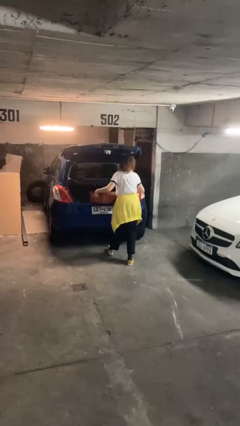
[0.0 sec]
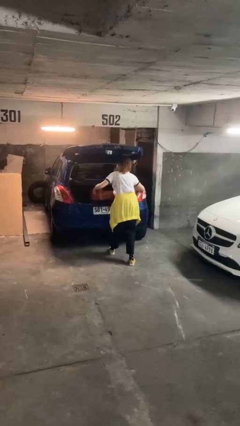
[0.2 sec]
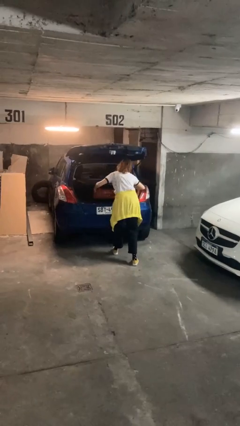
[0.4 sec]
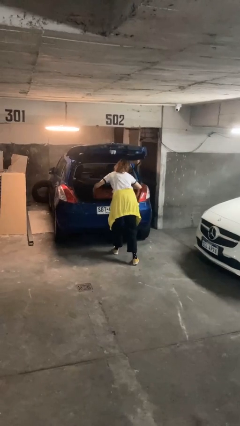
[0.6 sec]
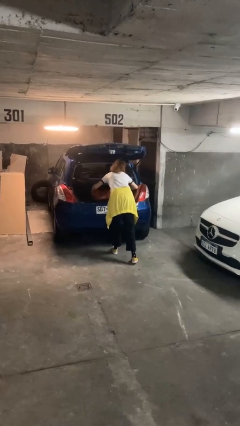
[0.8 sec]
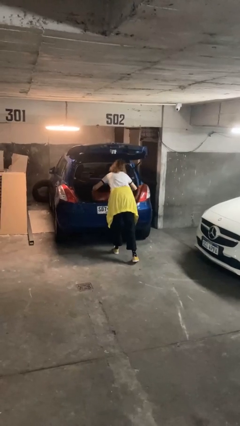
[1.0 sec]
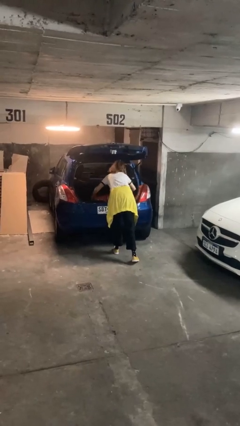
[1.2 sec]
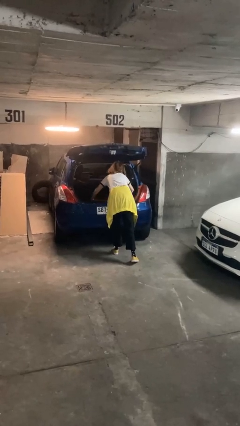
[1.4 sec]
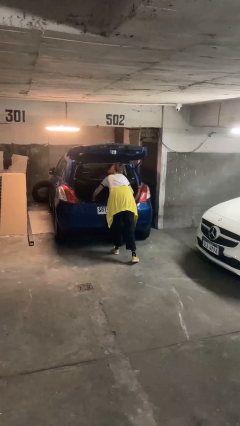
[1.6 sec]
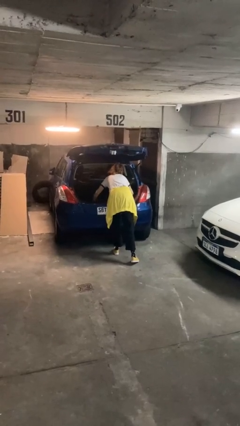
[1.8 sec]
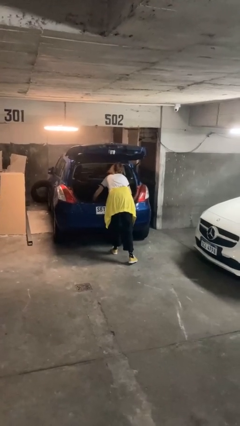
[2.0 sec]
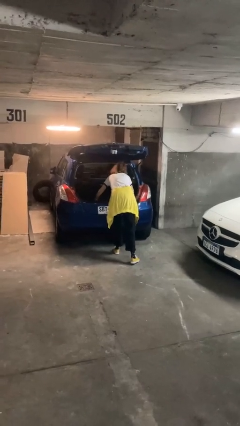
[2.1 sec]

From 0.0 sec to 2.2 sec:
person loads car

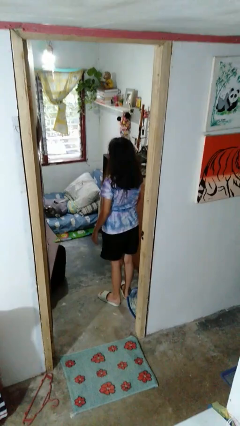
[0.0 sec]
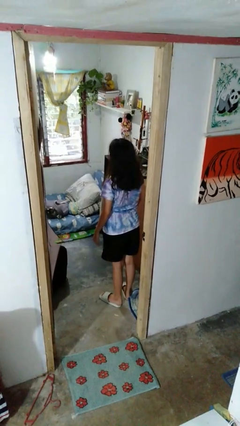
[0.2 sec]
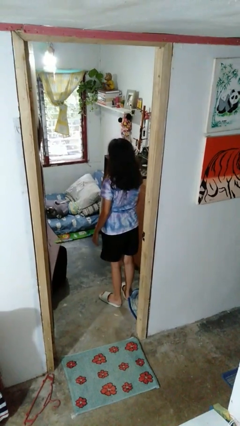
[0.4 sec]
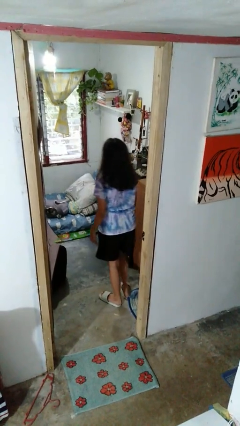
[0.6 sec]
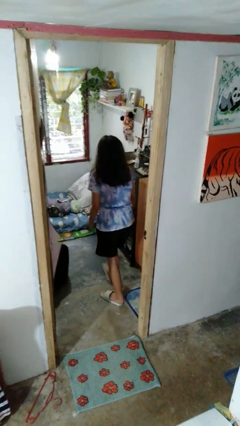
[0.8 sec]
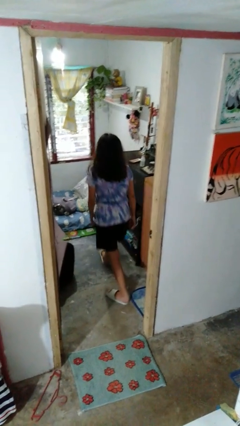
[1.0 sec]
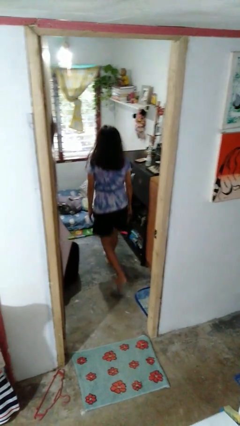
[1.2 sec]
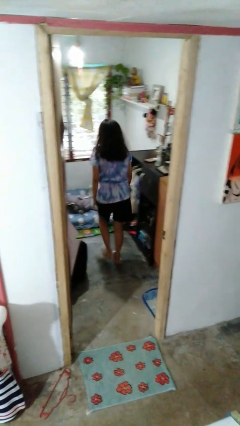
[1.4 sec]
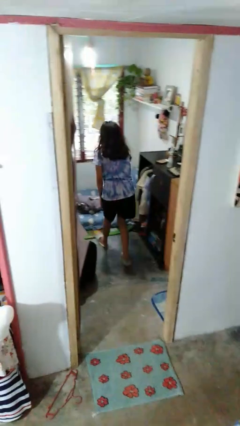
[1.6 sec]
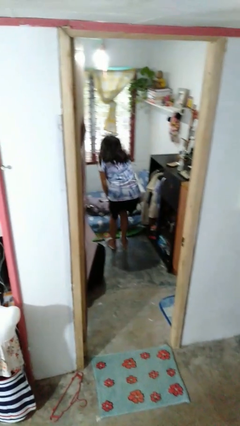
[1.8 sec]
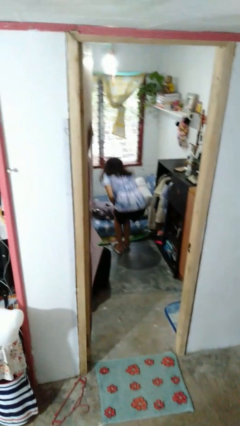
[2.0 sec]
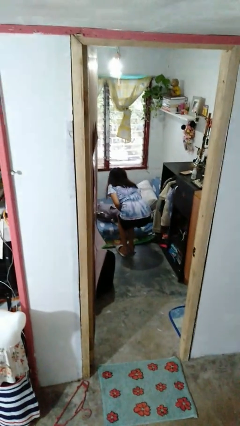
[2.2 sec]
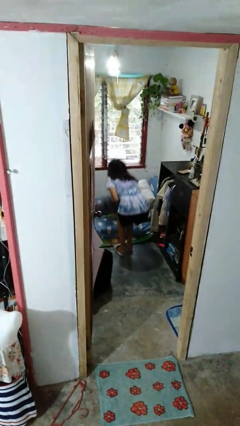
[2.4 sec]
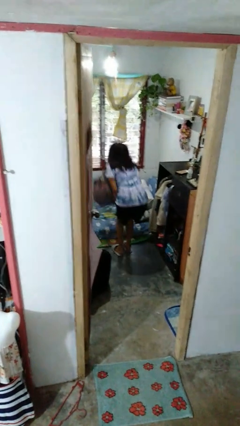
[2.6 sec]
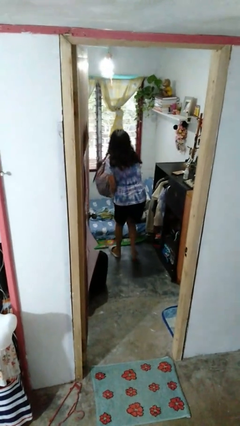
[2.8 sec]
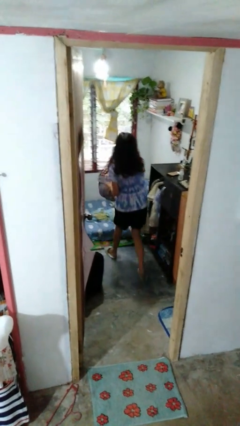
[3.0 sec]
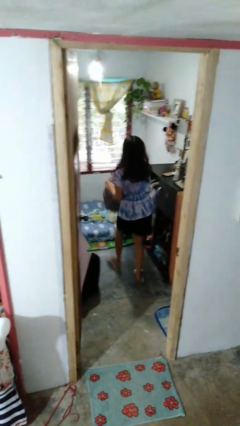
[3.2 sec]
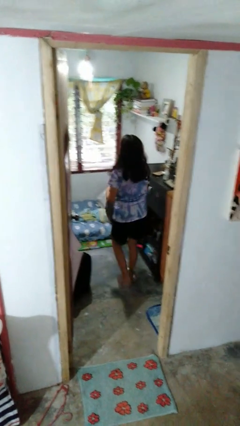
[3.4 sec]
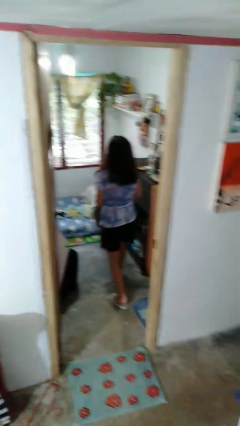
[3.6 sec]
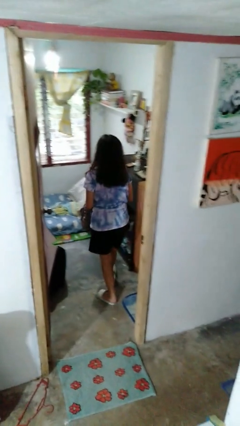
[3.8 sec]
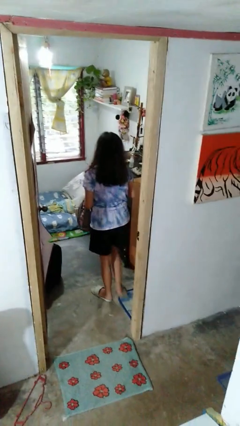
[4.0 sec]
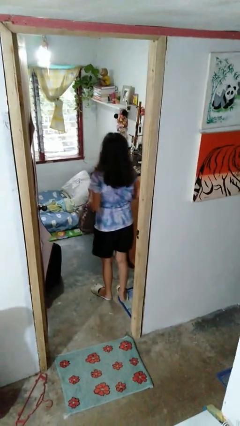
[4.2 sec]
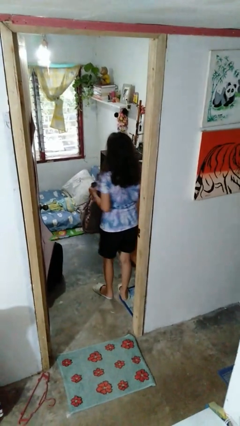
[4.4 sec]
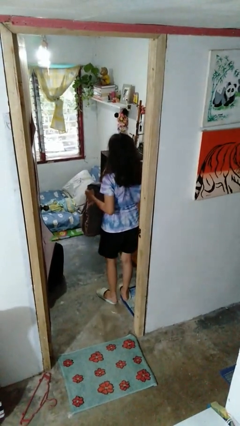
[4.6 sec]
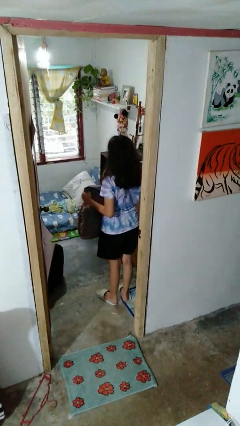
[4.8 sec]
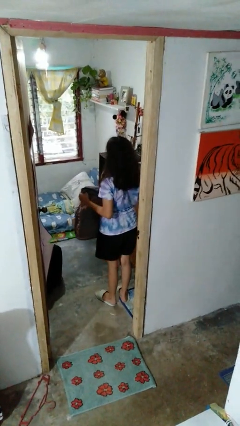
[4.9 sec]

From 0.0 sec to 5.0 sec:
person picks up object from bed

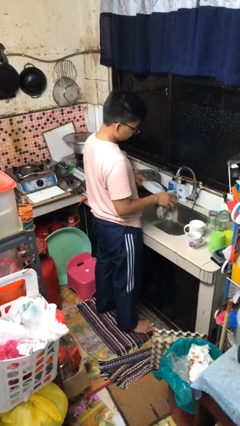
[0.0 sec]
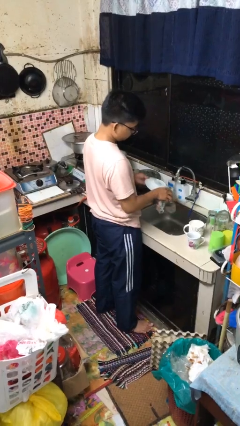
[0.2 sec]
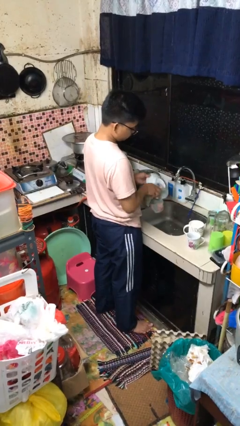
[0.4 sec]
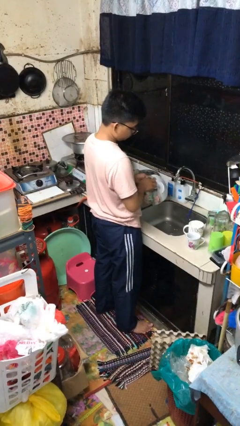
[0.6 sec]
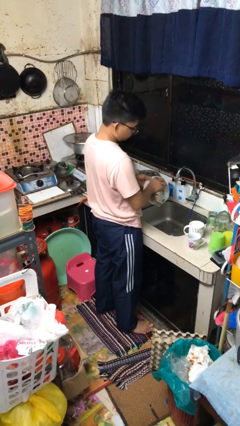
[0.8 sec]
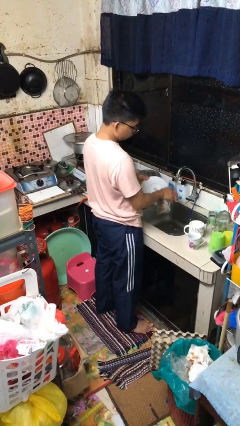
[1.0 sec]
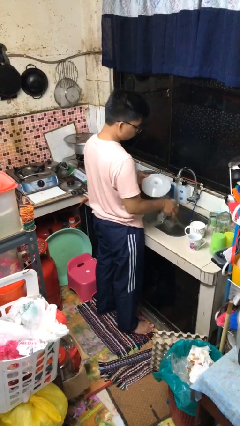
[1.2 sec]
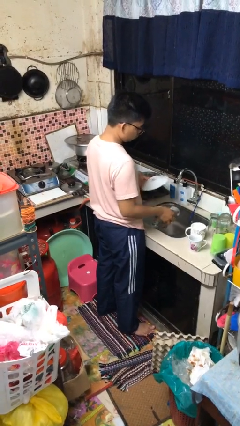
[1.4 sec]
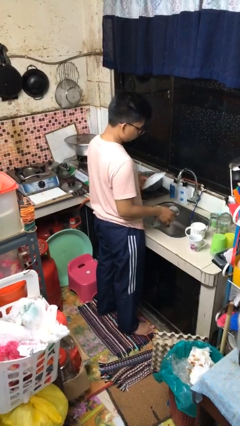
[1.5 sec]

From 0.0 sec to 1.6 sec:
person dries dish

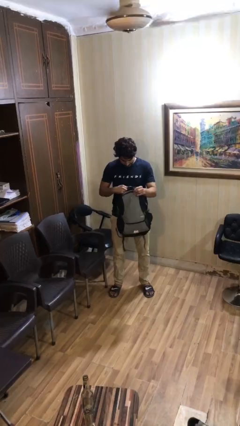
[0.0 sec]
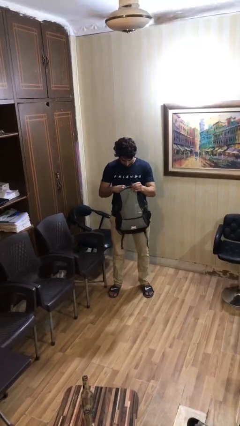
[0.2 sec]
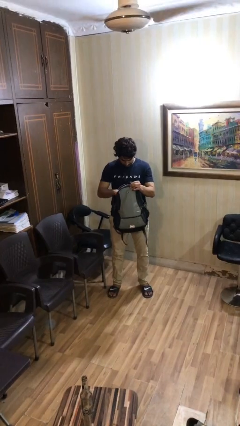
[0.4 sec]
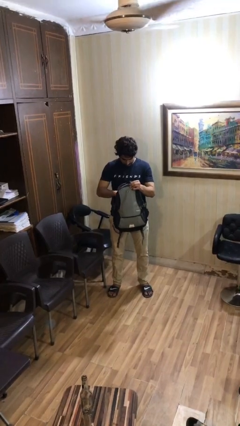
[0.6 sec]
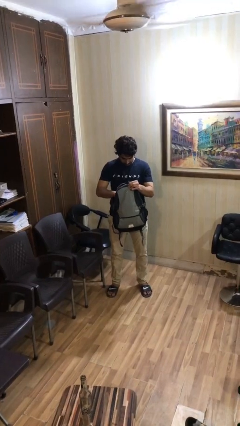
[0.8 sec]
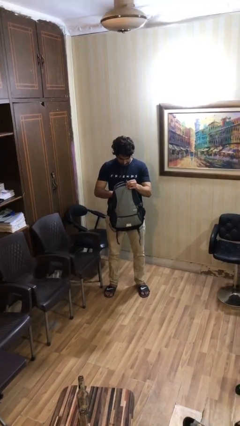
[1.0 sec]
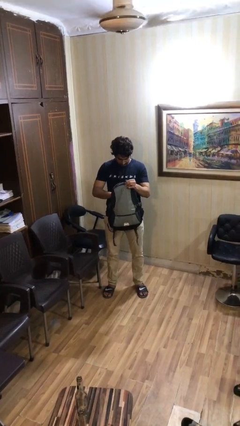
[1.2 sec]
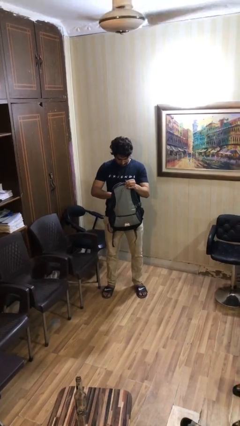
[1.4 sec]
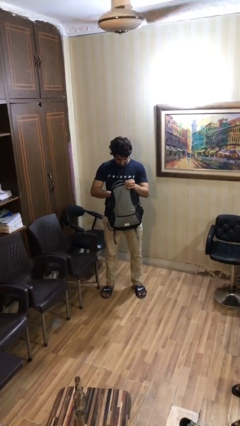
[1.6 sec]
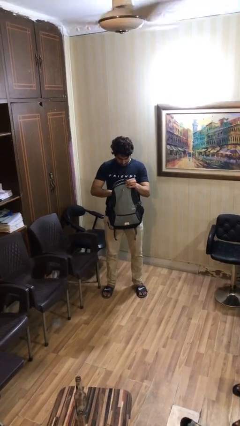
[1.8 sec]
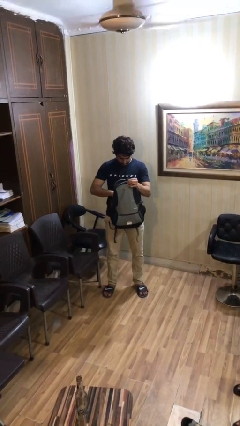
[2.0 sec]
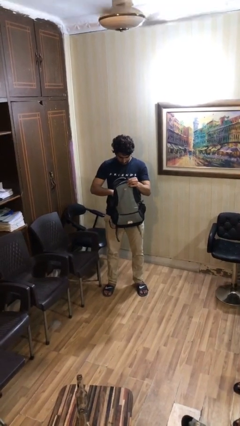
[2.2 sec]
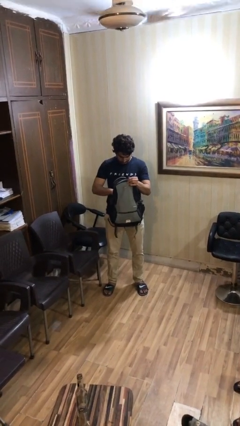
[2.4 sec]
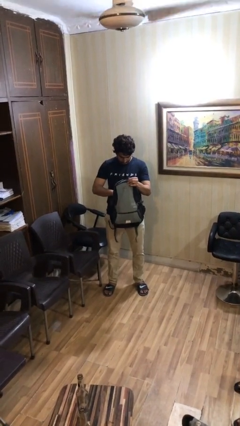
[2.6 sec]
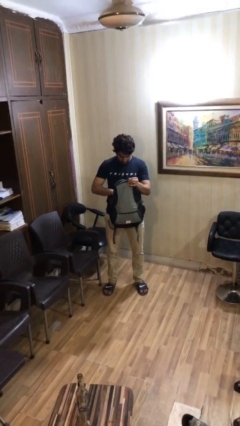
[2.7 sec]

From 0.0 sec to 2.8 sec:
person searches in backpack

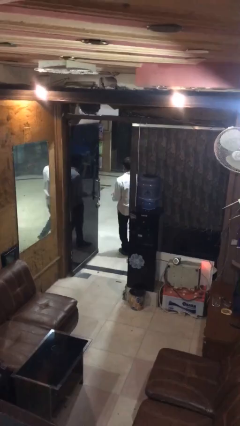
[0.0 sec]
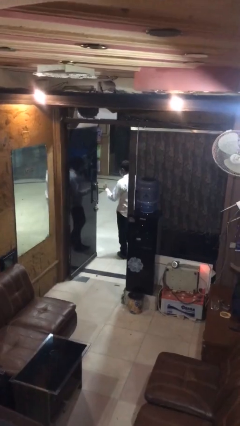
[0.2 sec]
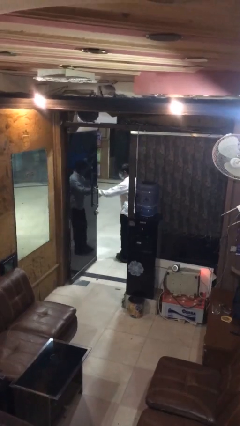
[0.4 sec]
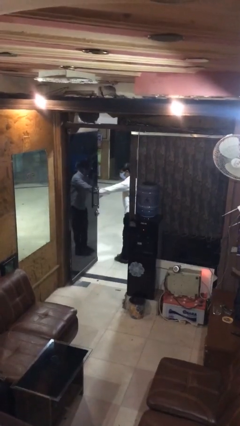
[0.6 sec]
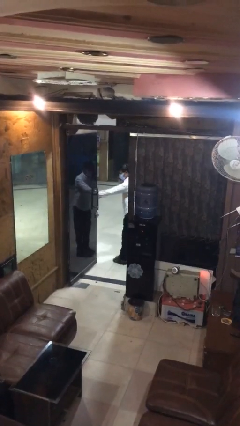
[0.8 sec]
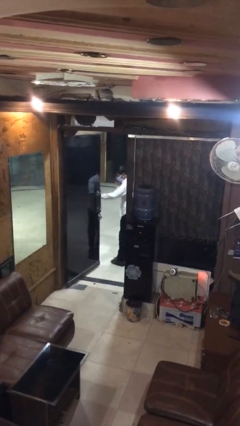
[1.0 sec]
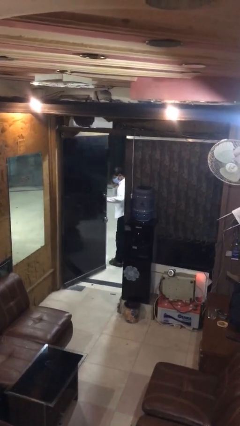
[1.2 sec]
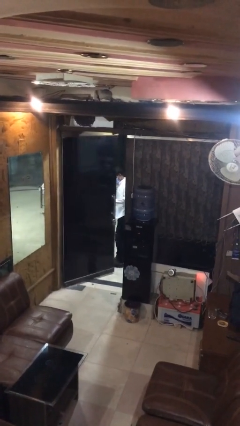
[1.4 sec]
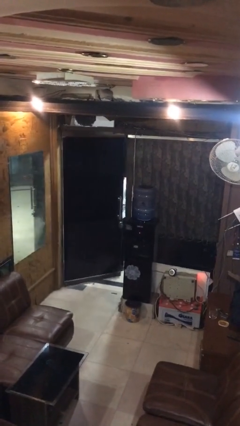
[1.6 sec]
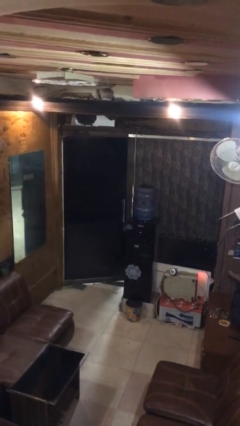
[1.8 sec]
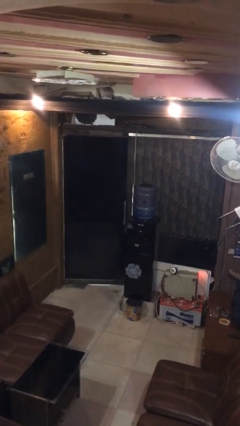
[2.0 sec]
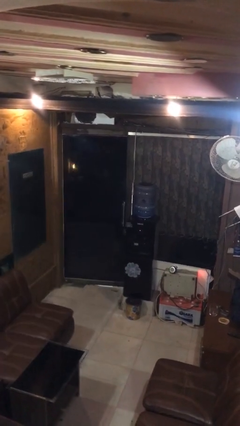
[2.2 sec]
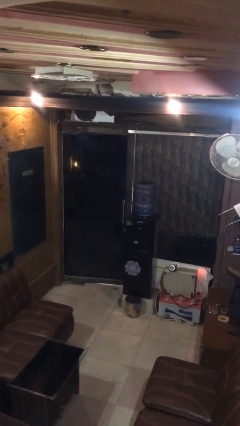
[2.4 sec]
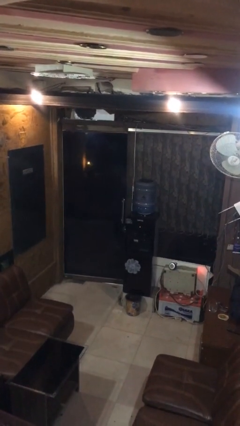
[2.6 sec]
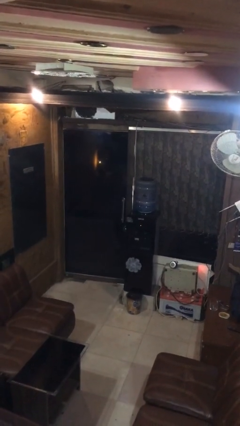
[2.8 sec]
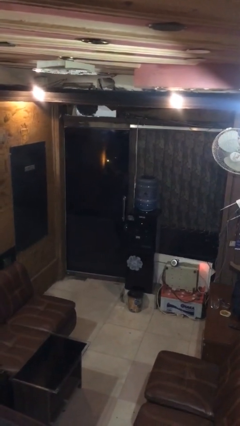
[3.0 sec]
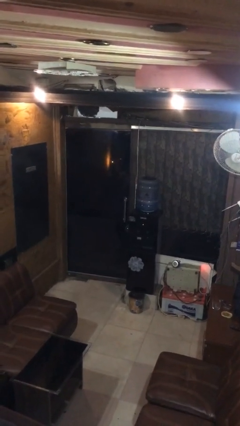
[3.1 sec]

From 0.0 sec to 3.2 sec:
person closes facility door

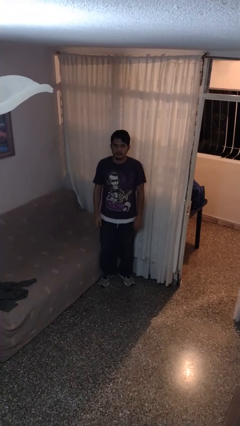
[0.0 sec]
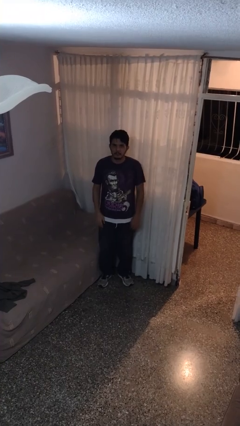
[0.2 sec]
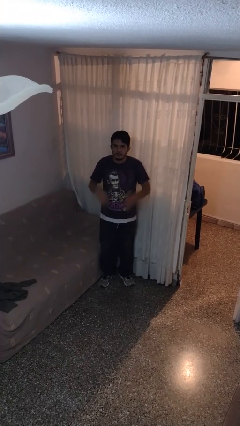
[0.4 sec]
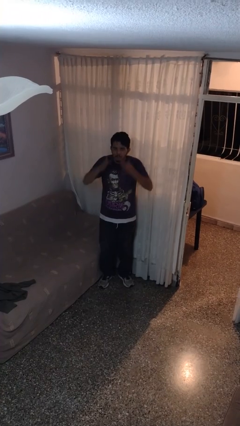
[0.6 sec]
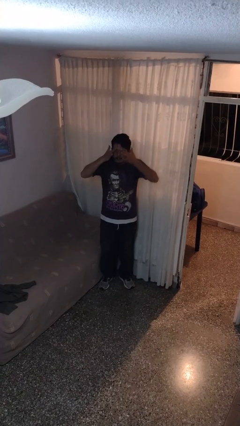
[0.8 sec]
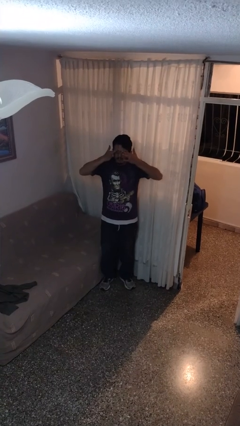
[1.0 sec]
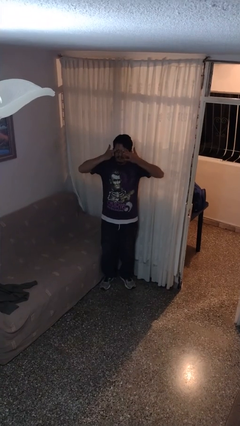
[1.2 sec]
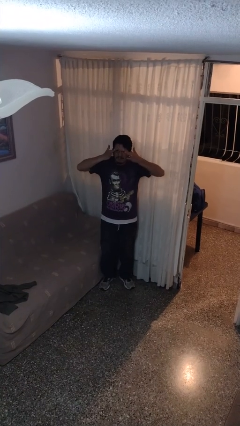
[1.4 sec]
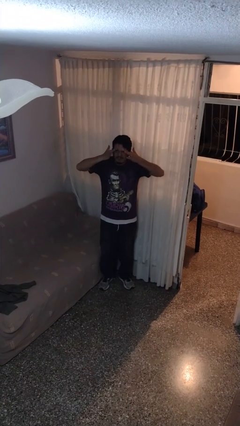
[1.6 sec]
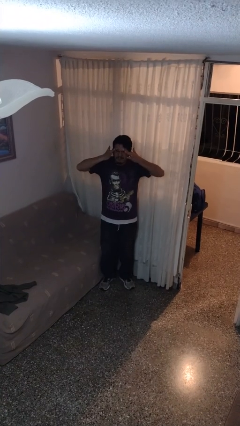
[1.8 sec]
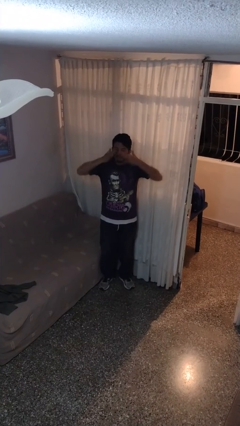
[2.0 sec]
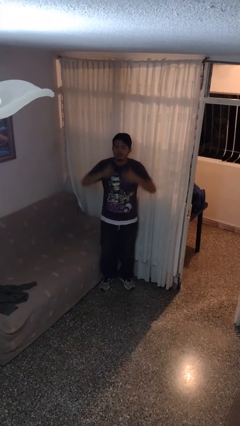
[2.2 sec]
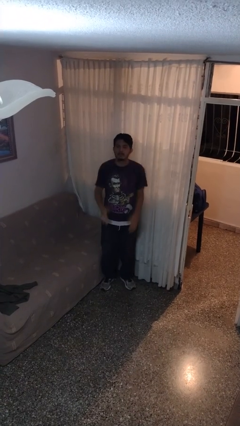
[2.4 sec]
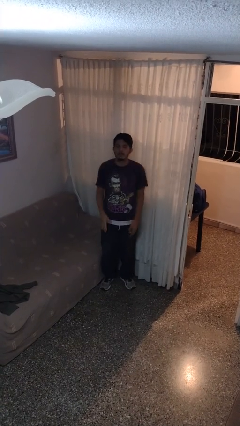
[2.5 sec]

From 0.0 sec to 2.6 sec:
person rubs eyes
